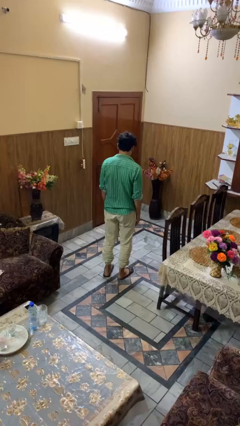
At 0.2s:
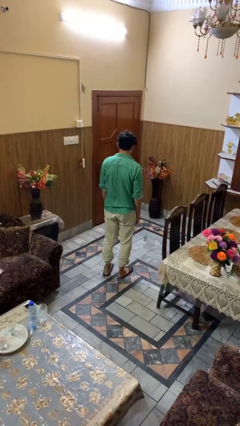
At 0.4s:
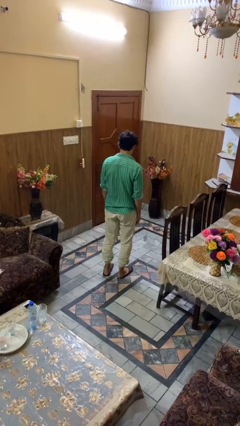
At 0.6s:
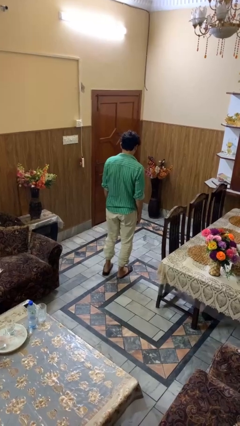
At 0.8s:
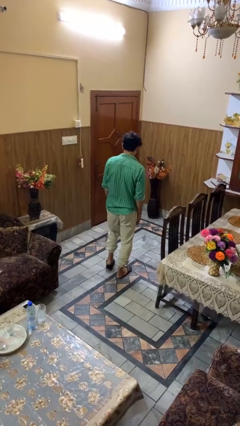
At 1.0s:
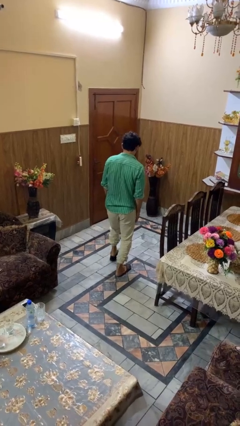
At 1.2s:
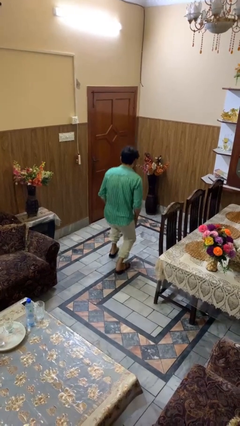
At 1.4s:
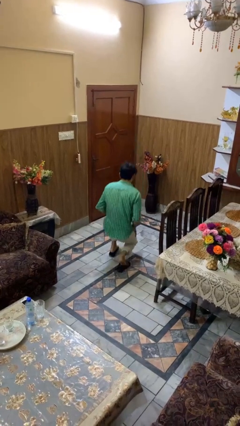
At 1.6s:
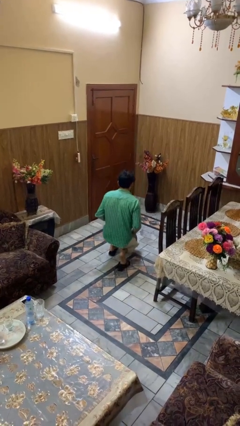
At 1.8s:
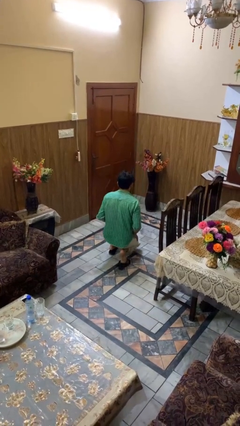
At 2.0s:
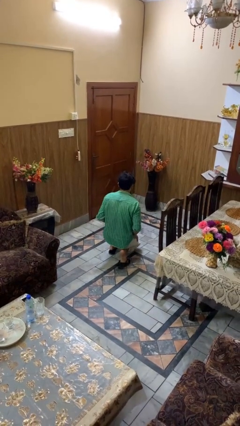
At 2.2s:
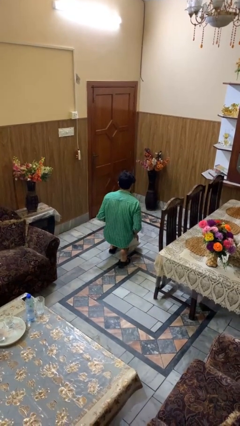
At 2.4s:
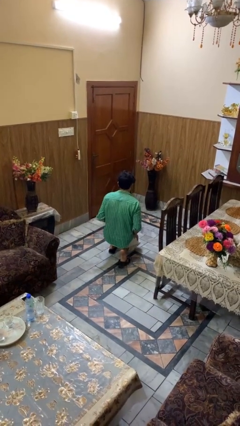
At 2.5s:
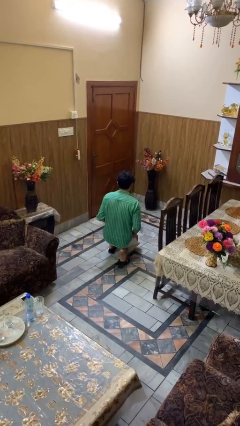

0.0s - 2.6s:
person kneels

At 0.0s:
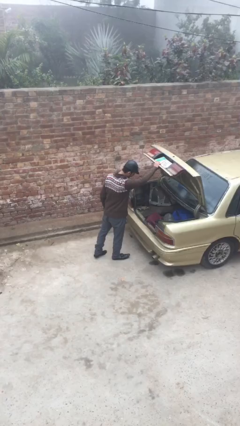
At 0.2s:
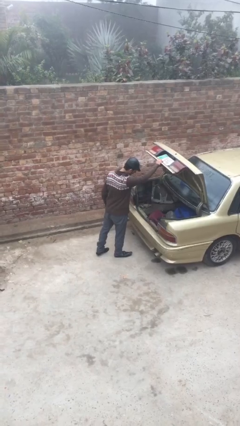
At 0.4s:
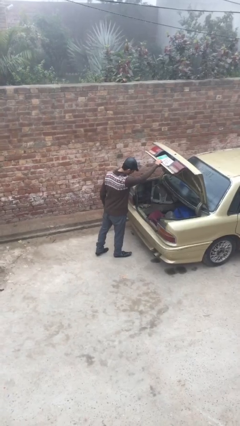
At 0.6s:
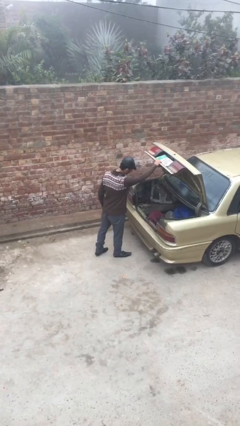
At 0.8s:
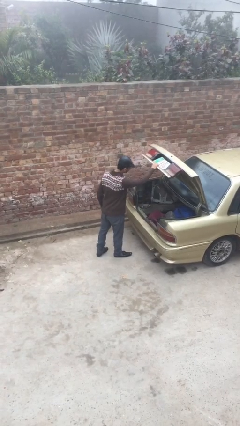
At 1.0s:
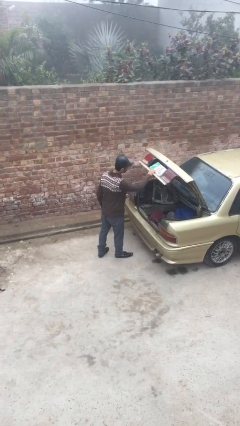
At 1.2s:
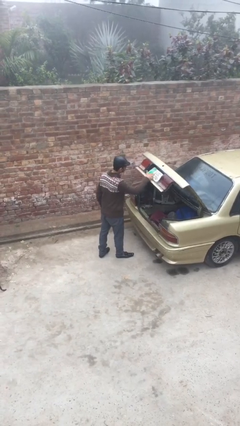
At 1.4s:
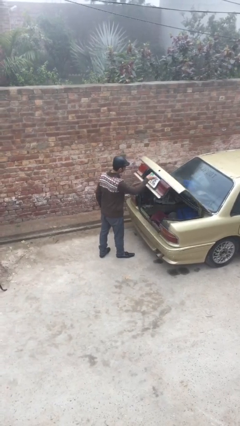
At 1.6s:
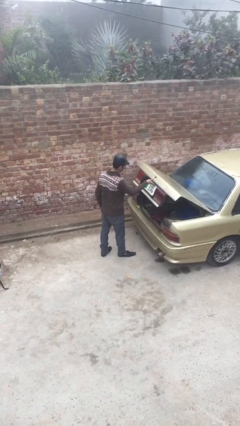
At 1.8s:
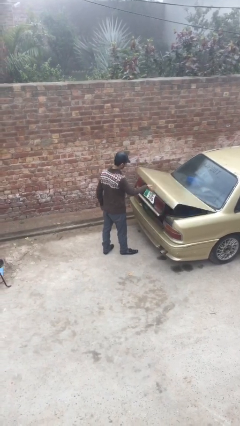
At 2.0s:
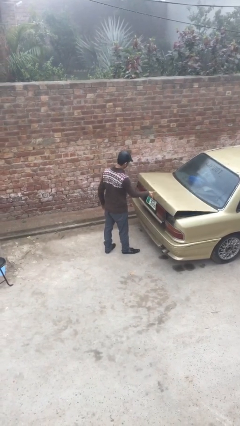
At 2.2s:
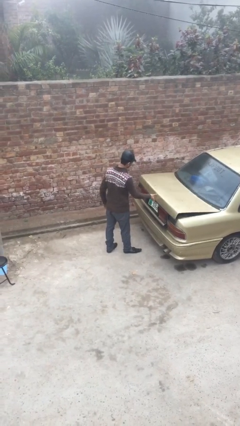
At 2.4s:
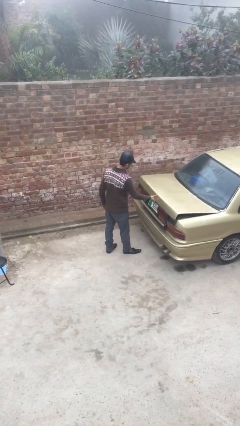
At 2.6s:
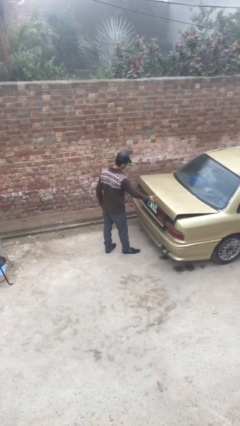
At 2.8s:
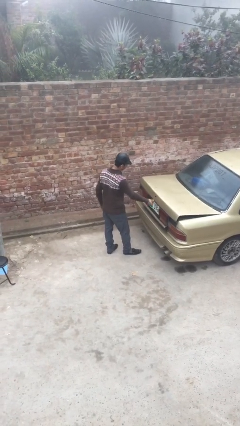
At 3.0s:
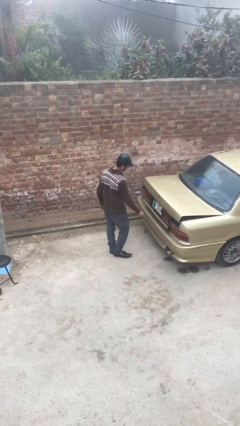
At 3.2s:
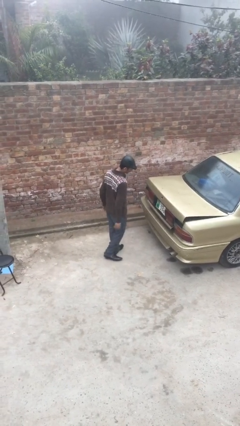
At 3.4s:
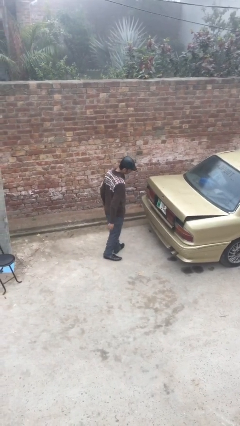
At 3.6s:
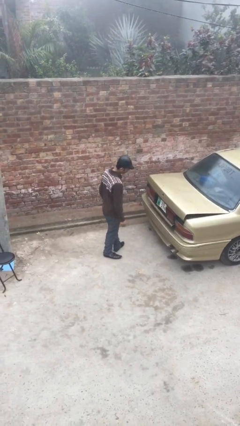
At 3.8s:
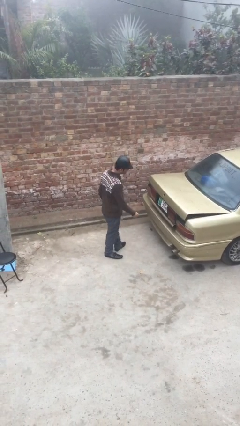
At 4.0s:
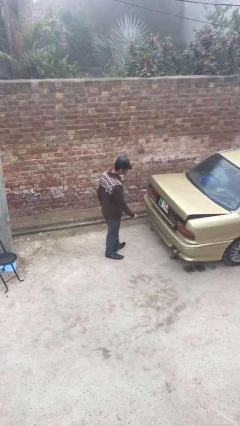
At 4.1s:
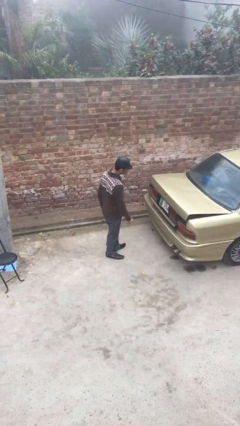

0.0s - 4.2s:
person closes car trunk

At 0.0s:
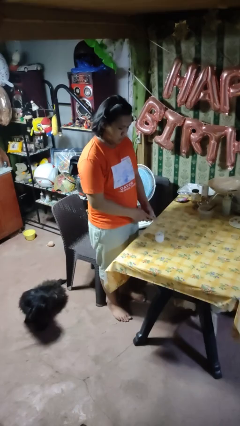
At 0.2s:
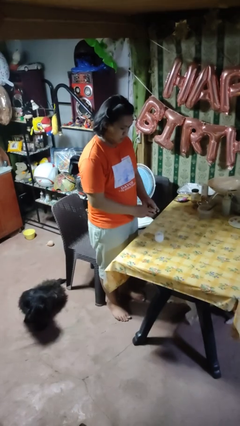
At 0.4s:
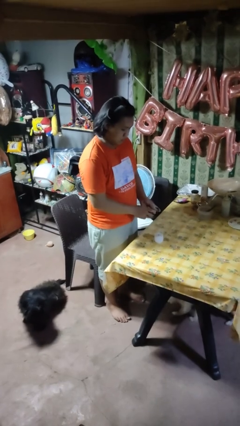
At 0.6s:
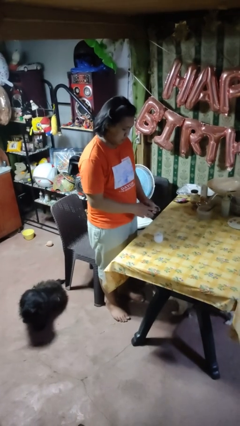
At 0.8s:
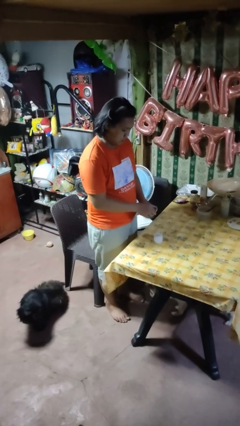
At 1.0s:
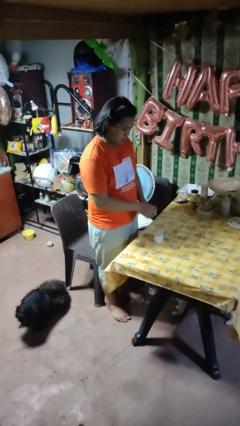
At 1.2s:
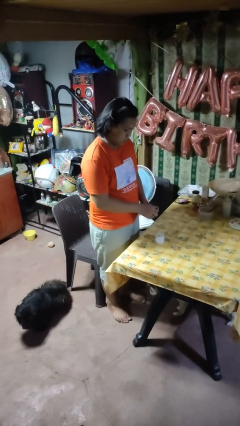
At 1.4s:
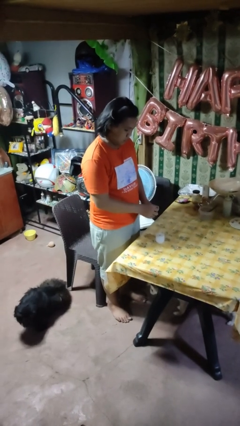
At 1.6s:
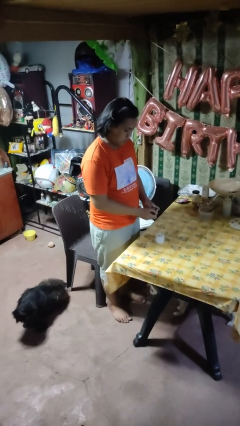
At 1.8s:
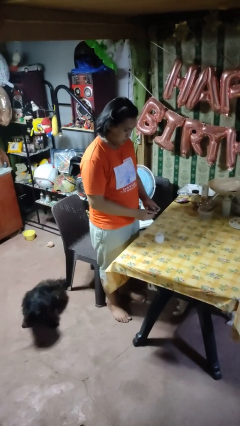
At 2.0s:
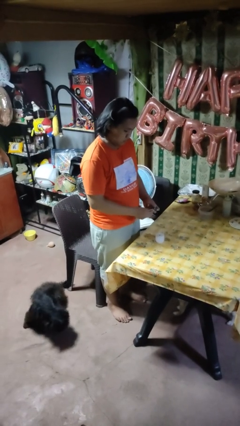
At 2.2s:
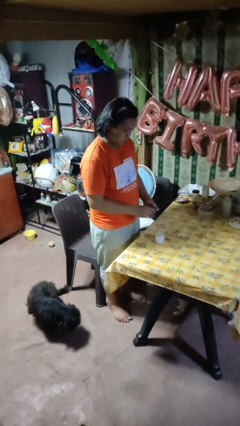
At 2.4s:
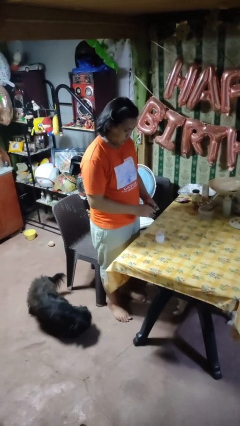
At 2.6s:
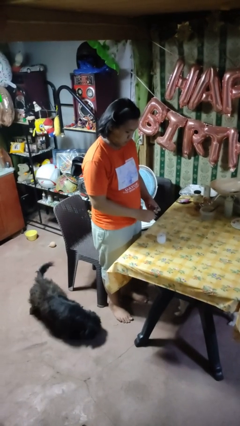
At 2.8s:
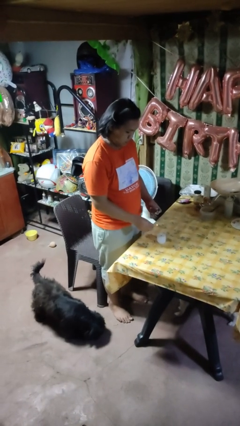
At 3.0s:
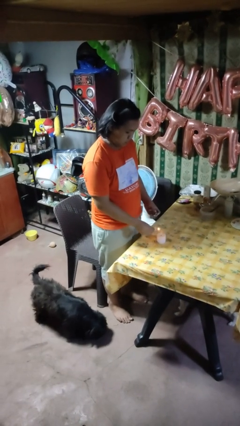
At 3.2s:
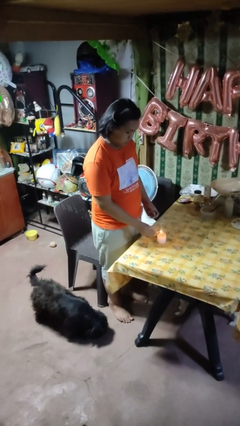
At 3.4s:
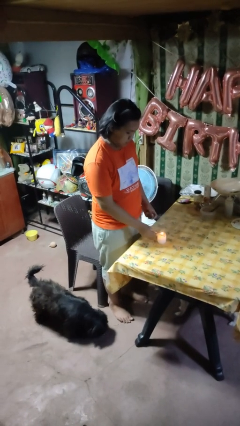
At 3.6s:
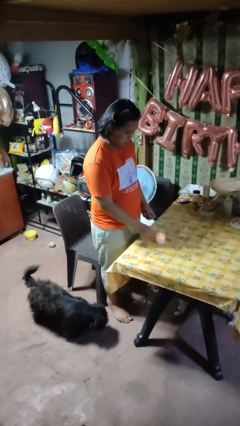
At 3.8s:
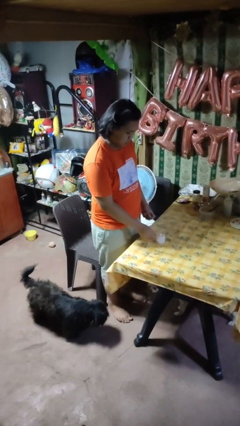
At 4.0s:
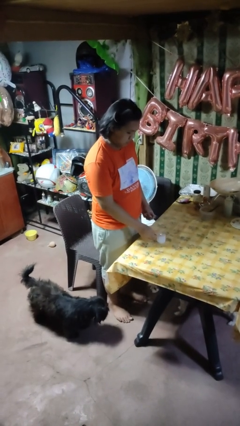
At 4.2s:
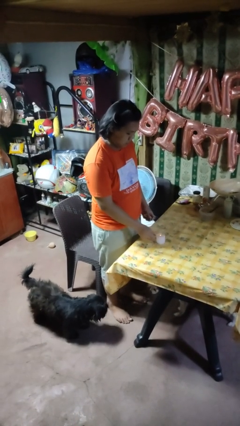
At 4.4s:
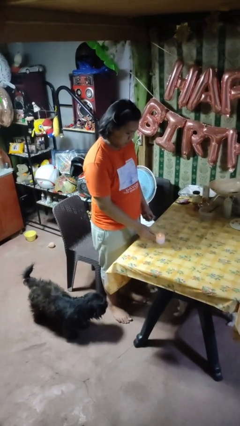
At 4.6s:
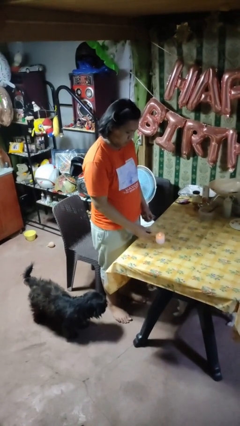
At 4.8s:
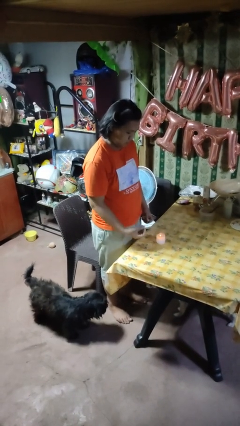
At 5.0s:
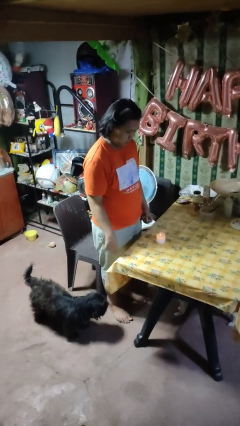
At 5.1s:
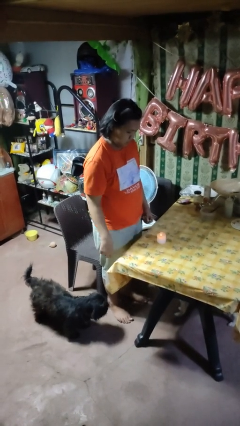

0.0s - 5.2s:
person lights candle

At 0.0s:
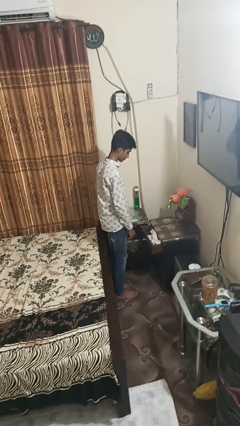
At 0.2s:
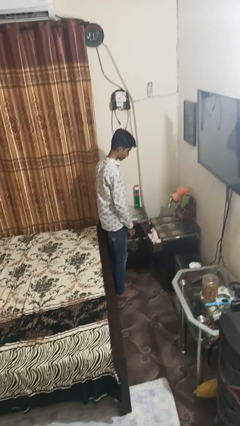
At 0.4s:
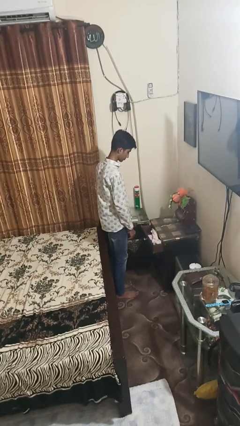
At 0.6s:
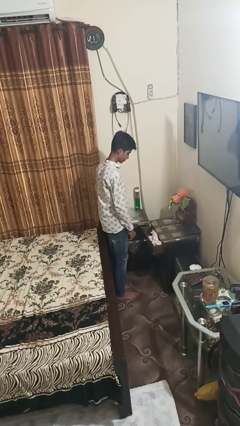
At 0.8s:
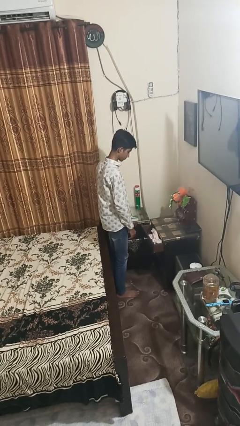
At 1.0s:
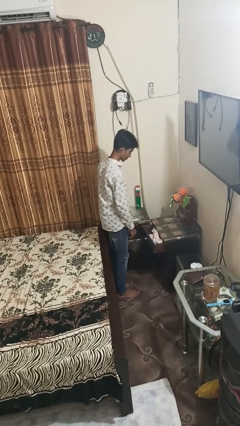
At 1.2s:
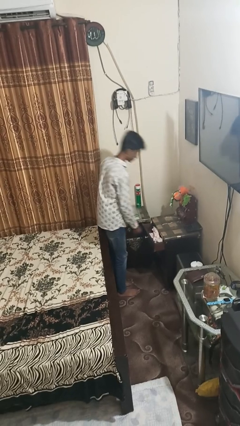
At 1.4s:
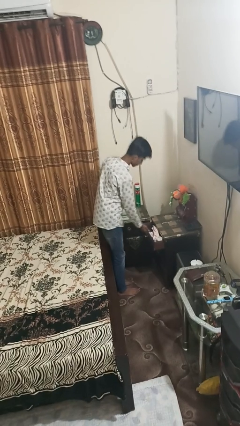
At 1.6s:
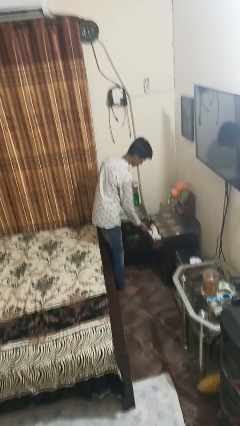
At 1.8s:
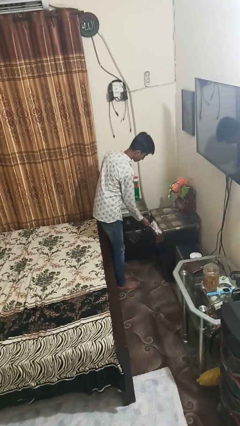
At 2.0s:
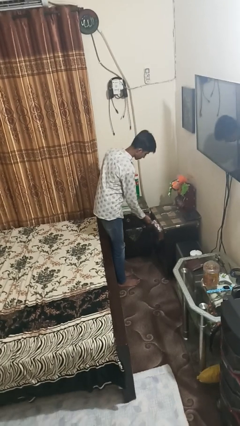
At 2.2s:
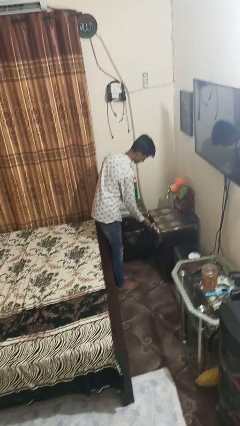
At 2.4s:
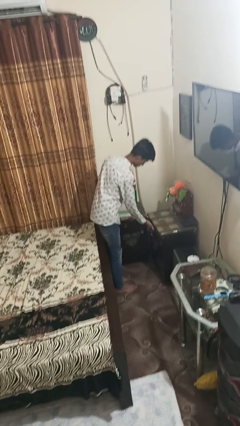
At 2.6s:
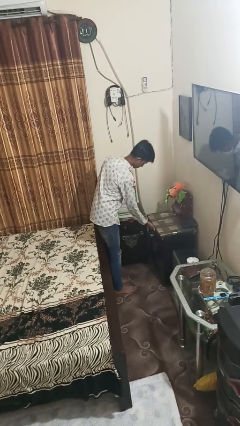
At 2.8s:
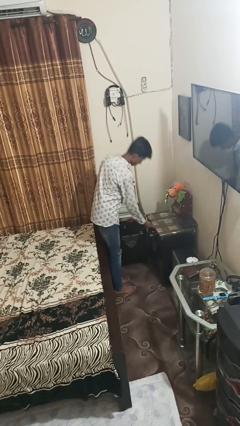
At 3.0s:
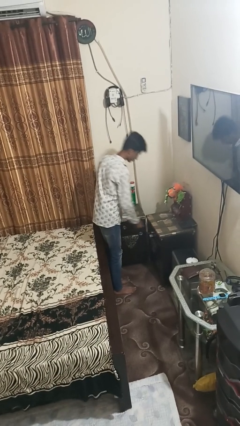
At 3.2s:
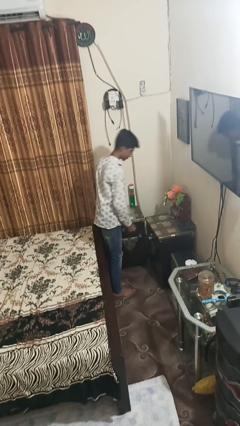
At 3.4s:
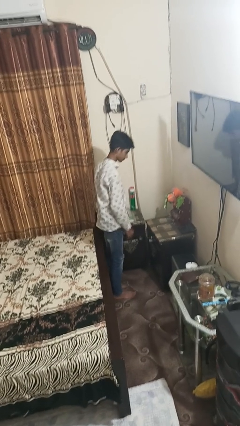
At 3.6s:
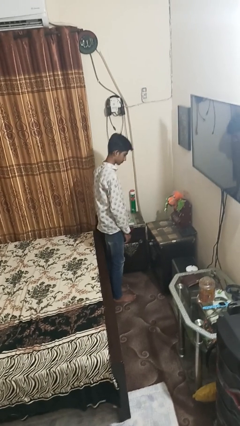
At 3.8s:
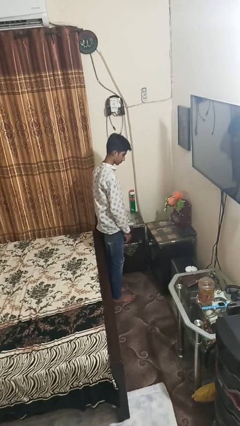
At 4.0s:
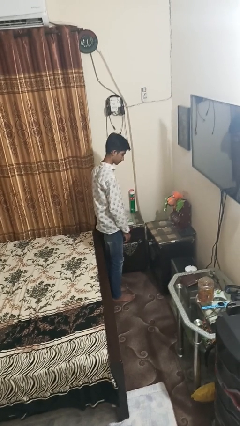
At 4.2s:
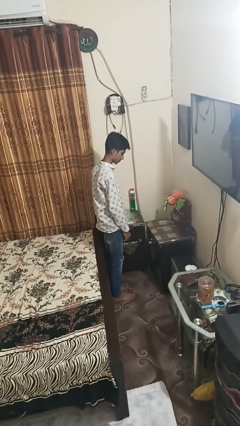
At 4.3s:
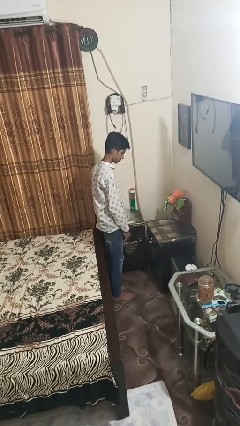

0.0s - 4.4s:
person closes dresser drawer

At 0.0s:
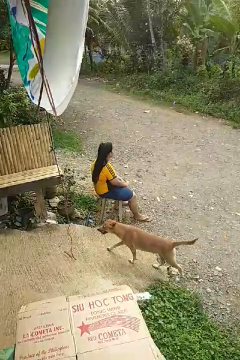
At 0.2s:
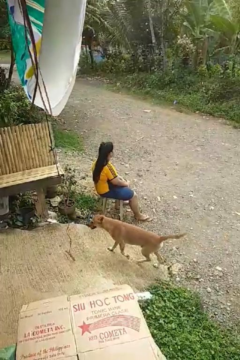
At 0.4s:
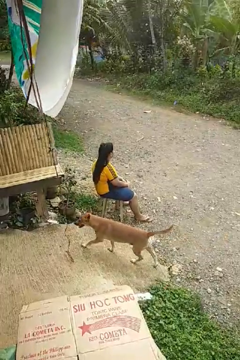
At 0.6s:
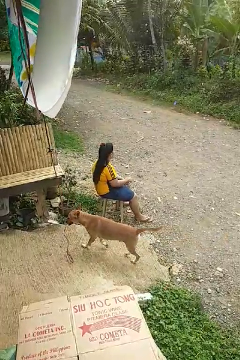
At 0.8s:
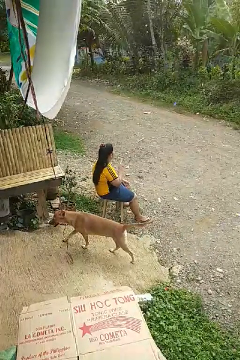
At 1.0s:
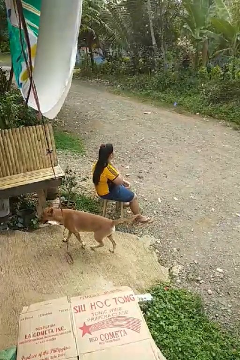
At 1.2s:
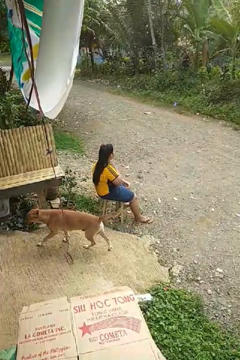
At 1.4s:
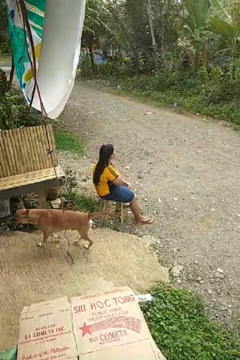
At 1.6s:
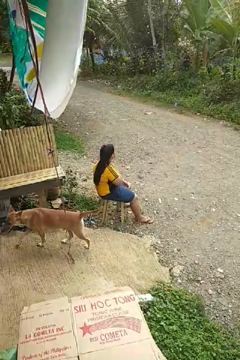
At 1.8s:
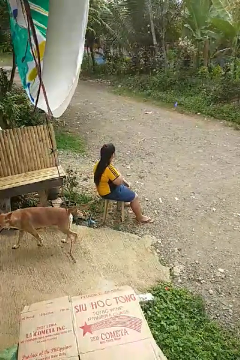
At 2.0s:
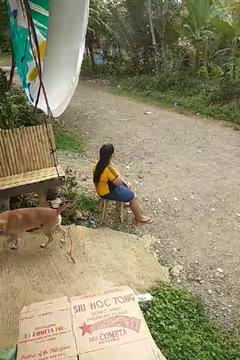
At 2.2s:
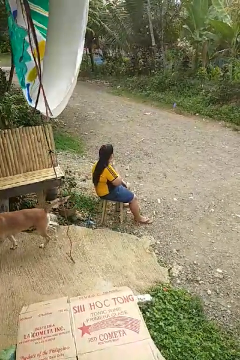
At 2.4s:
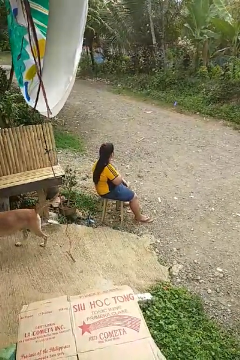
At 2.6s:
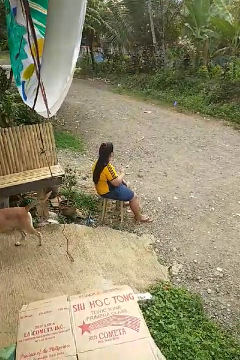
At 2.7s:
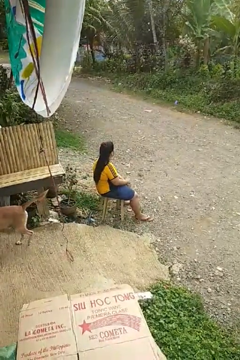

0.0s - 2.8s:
person drums on chest
